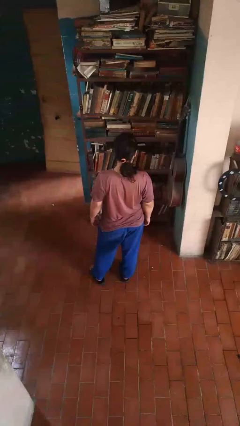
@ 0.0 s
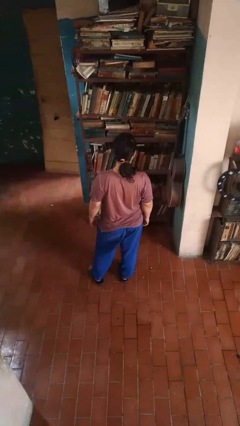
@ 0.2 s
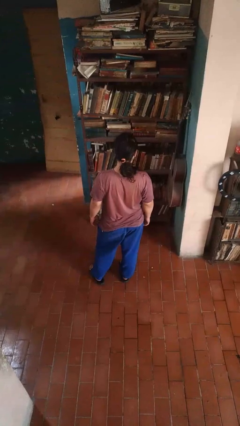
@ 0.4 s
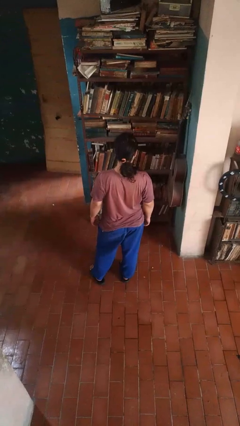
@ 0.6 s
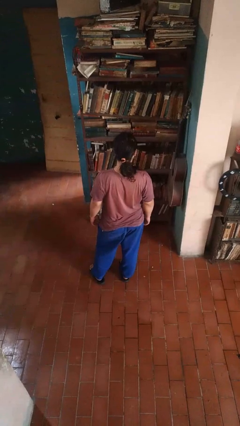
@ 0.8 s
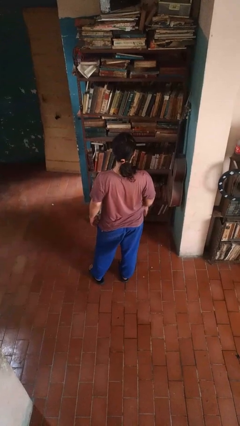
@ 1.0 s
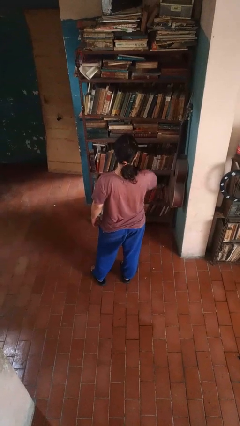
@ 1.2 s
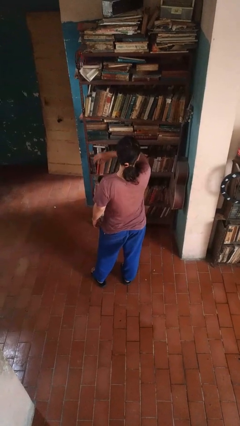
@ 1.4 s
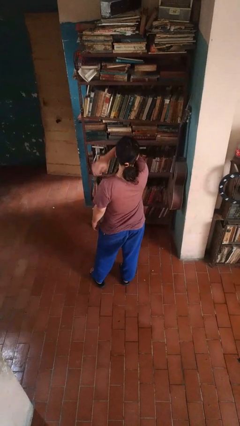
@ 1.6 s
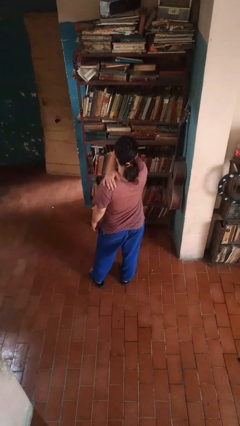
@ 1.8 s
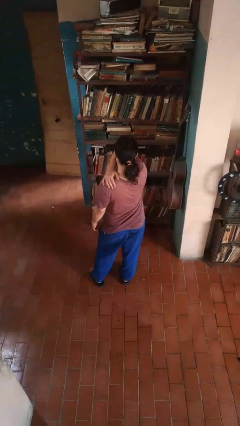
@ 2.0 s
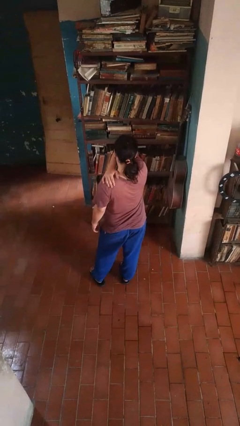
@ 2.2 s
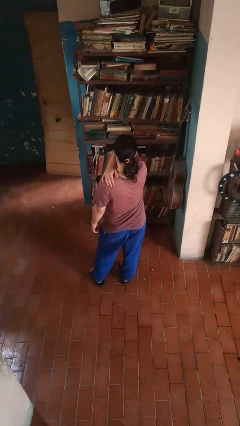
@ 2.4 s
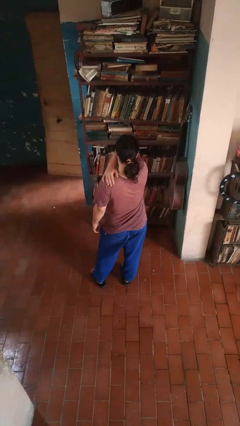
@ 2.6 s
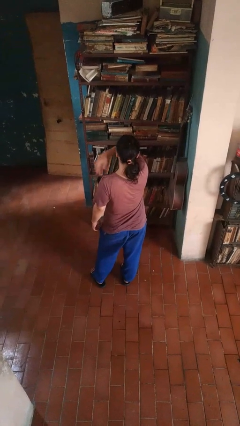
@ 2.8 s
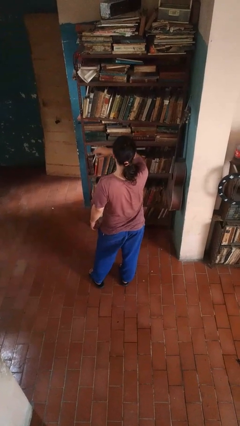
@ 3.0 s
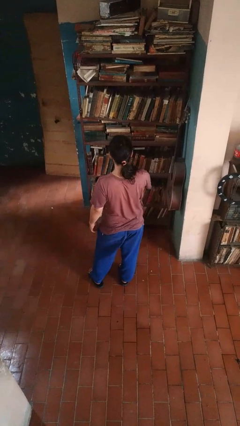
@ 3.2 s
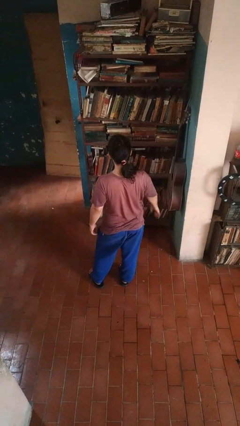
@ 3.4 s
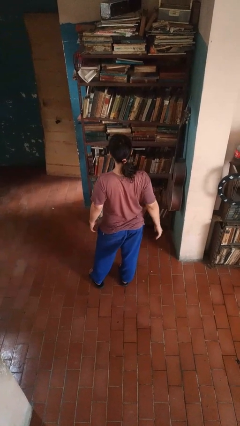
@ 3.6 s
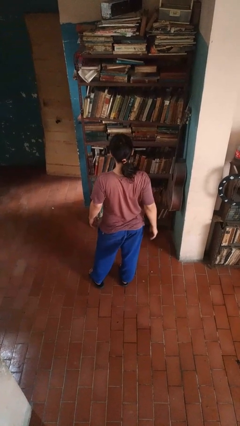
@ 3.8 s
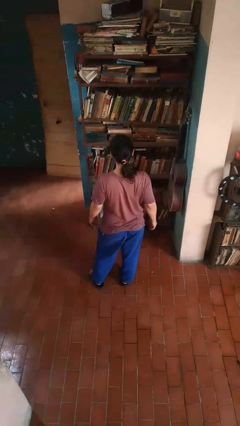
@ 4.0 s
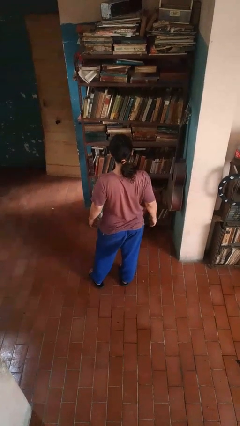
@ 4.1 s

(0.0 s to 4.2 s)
person sneezes into arm

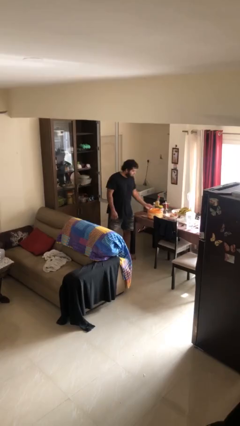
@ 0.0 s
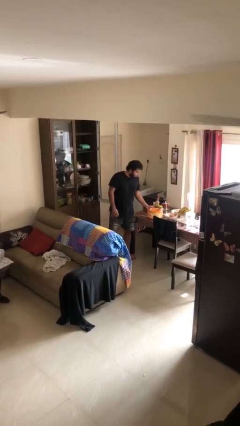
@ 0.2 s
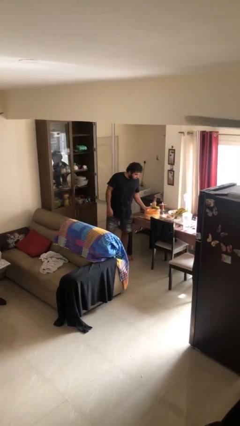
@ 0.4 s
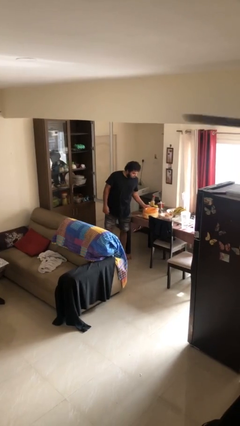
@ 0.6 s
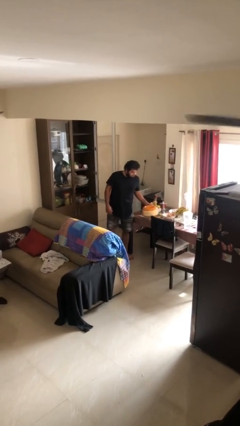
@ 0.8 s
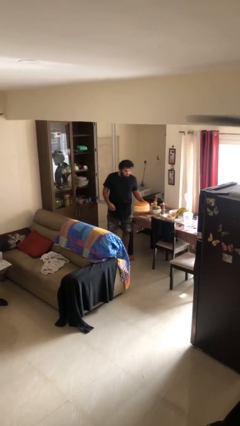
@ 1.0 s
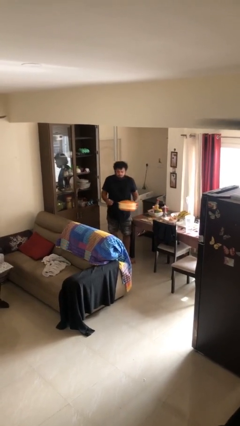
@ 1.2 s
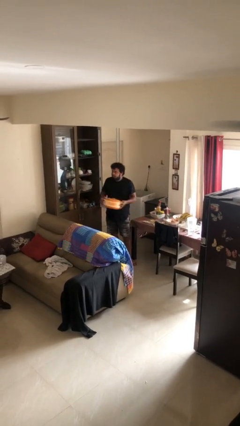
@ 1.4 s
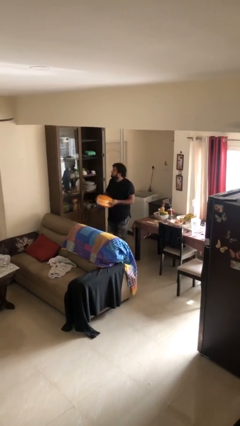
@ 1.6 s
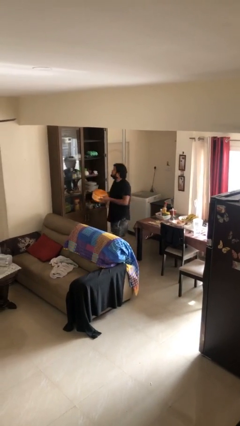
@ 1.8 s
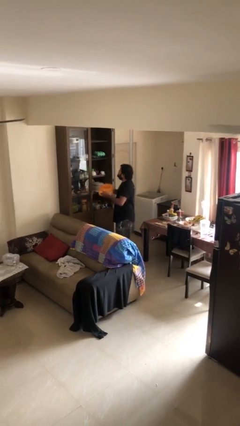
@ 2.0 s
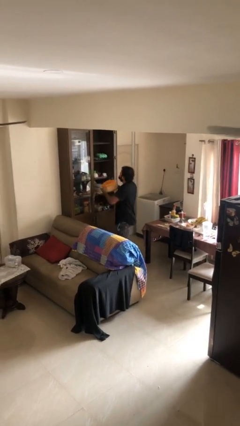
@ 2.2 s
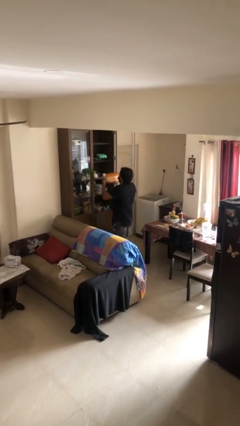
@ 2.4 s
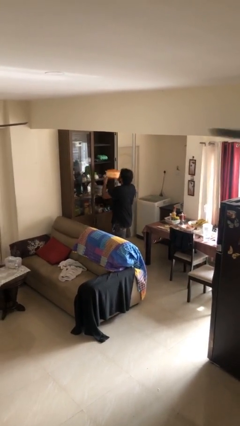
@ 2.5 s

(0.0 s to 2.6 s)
person picks up object from table

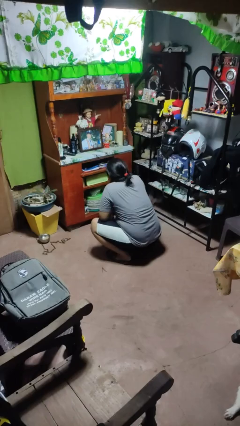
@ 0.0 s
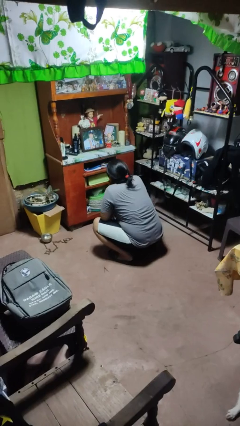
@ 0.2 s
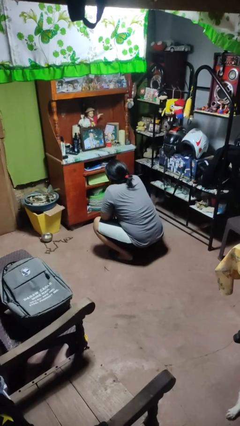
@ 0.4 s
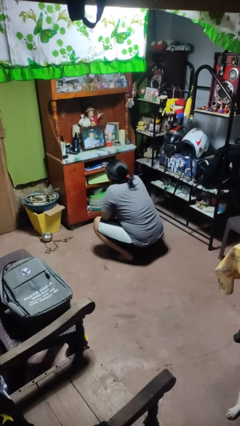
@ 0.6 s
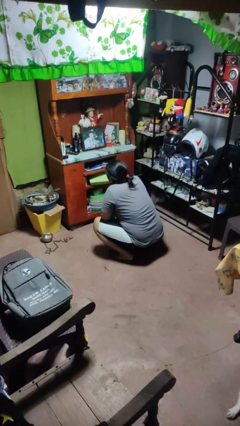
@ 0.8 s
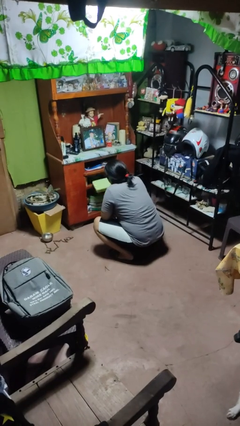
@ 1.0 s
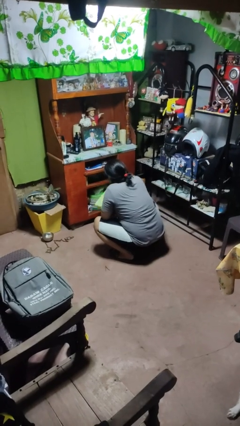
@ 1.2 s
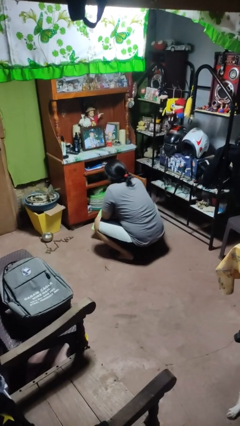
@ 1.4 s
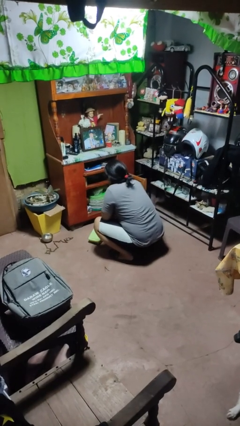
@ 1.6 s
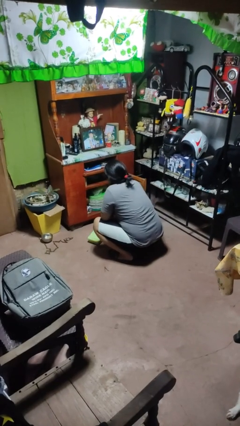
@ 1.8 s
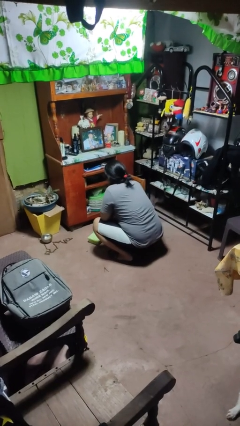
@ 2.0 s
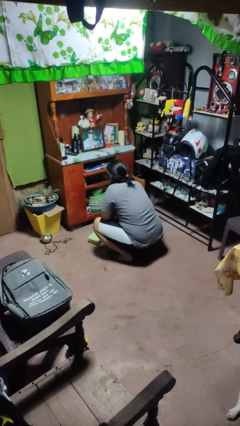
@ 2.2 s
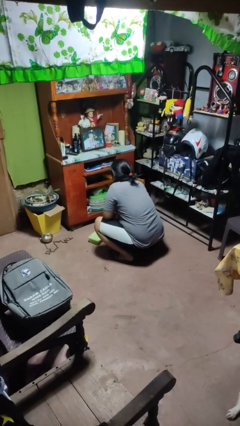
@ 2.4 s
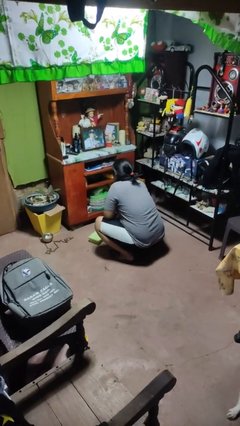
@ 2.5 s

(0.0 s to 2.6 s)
person takes object from cabinet

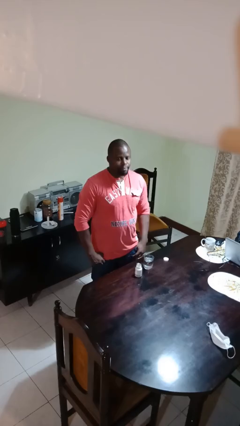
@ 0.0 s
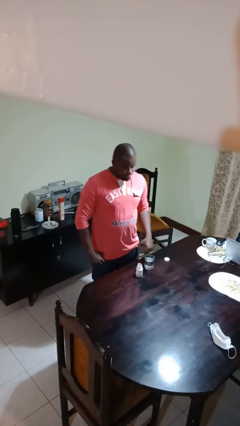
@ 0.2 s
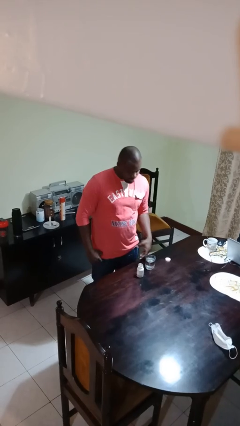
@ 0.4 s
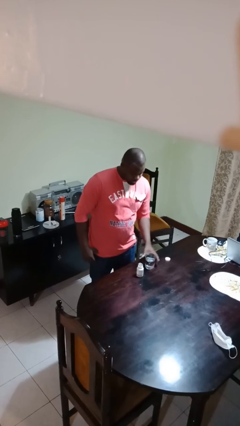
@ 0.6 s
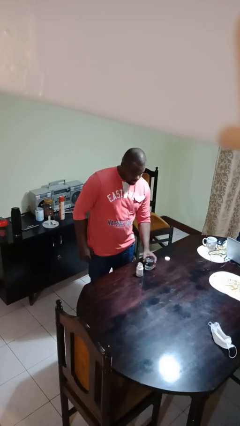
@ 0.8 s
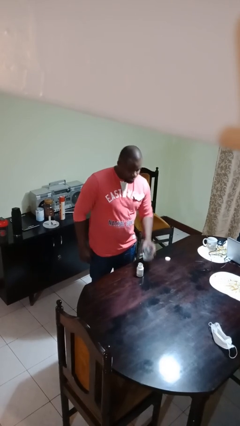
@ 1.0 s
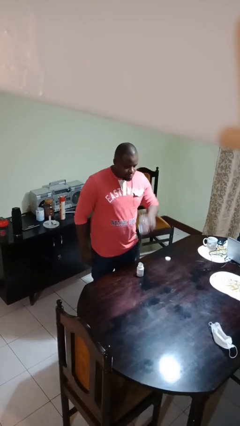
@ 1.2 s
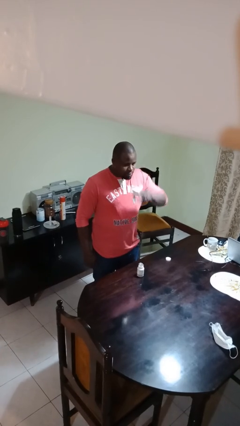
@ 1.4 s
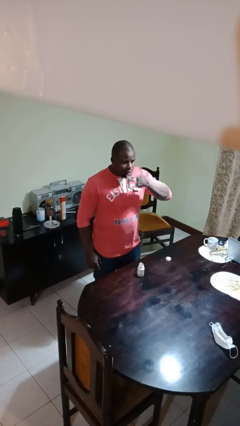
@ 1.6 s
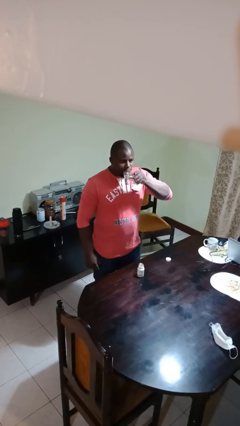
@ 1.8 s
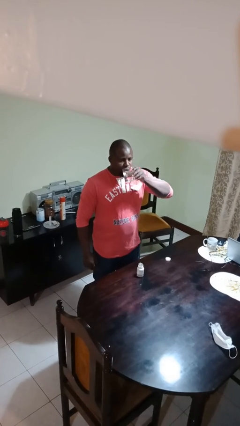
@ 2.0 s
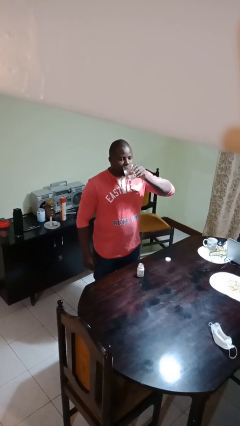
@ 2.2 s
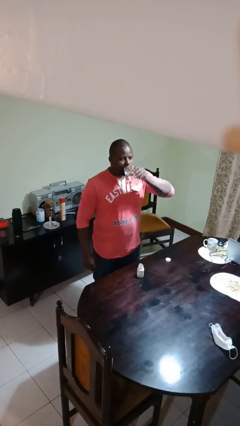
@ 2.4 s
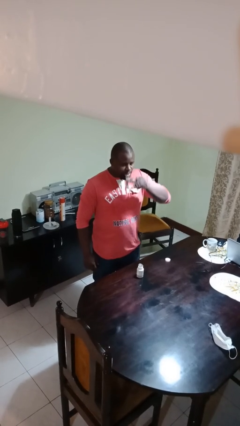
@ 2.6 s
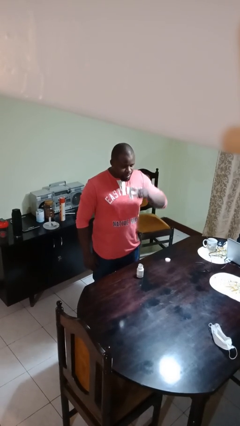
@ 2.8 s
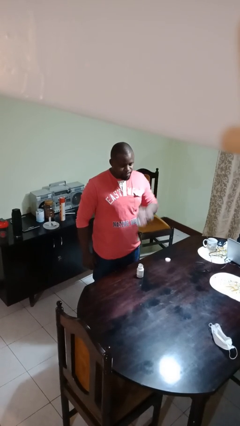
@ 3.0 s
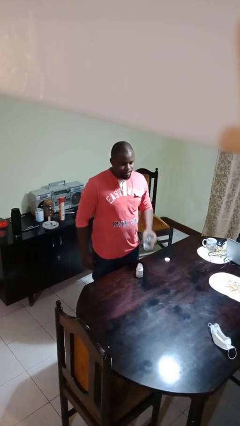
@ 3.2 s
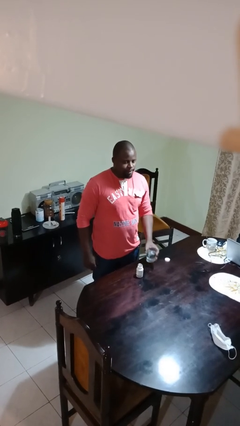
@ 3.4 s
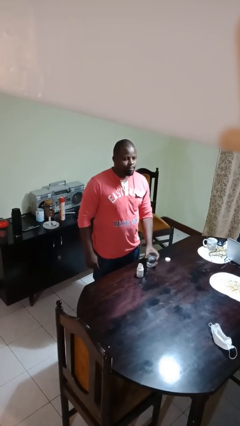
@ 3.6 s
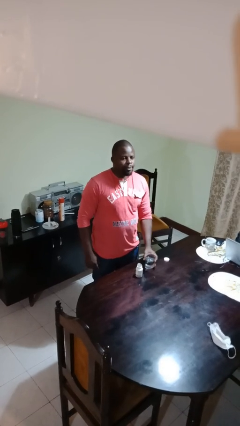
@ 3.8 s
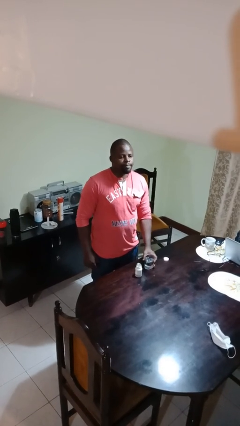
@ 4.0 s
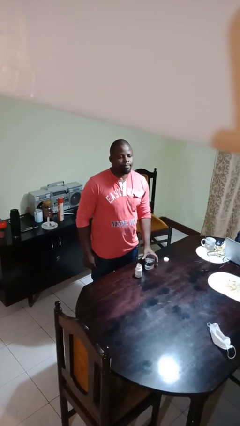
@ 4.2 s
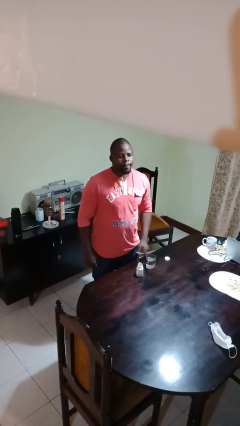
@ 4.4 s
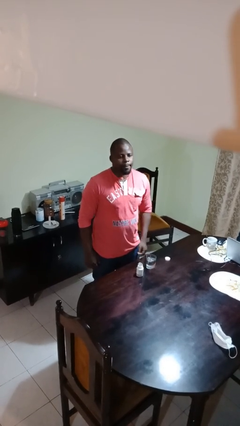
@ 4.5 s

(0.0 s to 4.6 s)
person drinks from cup

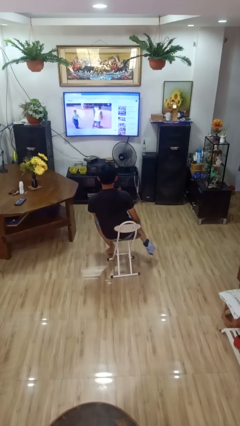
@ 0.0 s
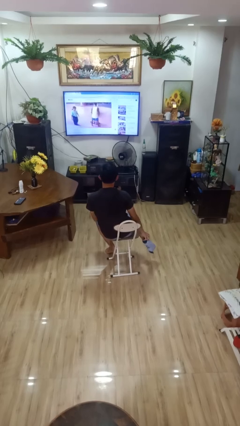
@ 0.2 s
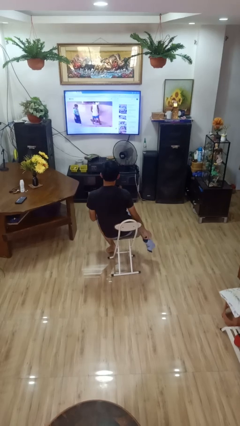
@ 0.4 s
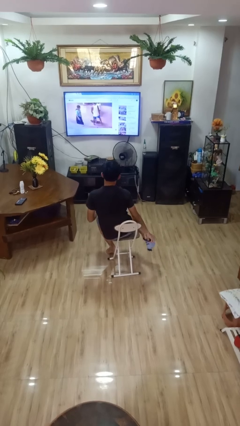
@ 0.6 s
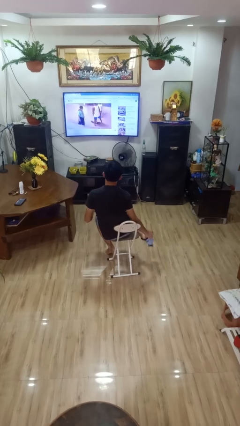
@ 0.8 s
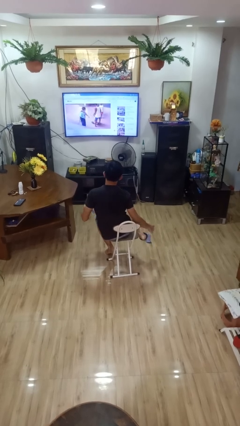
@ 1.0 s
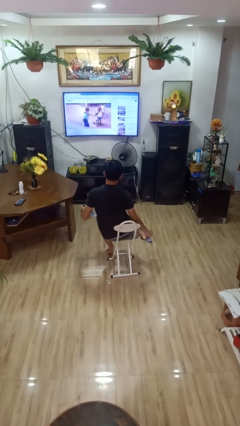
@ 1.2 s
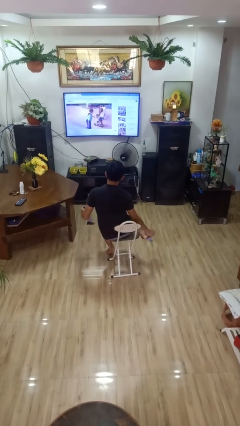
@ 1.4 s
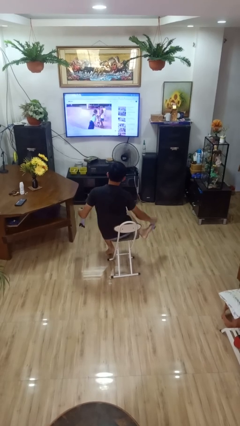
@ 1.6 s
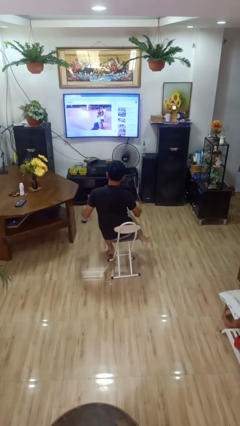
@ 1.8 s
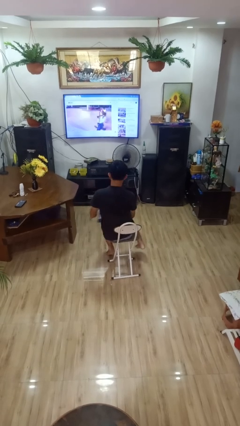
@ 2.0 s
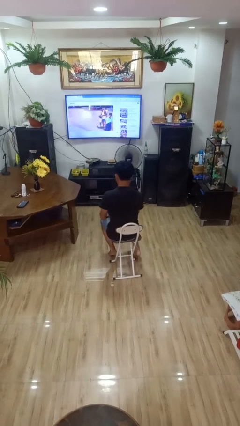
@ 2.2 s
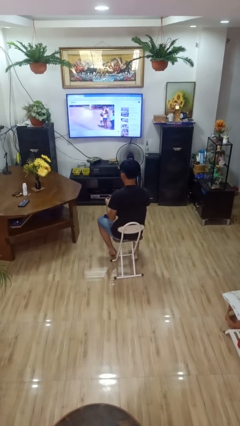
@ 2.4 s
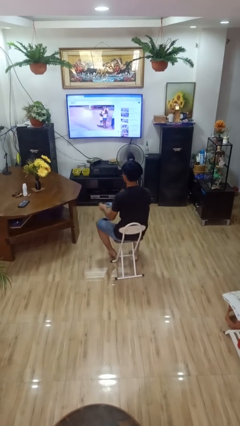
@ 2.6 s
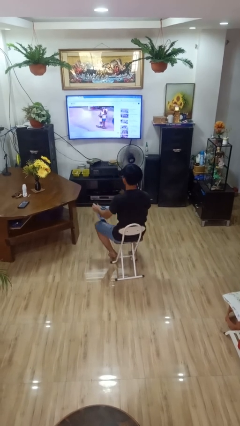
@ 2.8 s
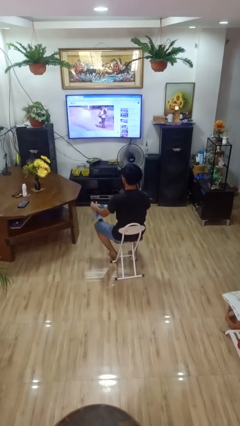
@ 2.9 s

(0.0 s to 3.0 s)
person takes off socks

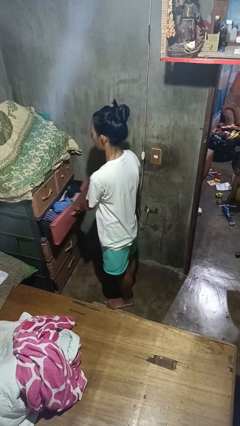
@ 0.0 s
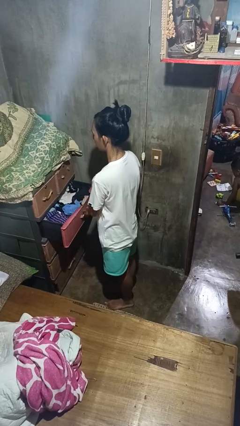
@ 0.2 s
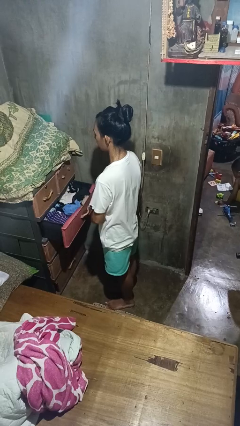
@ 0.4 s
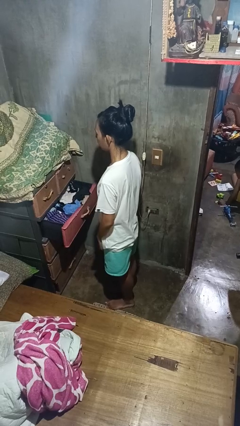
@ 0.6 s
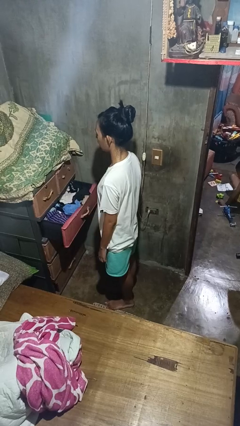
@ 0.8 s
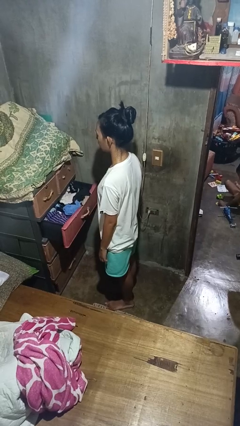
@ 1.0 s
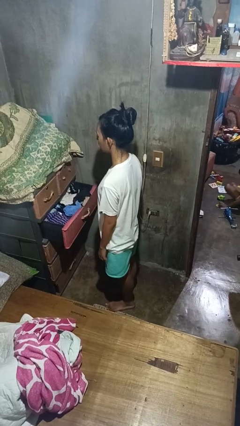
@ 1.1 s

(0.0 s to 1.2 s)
person opens dresser drawer
